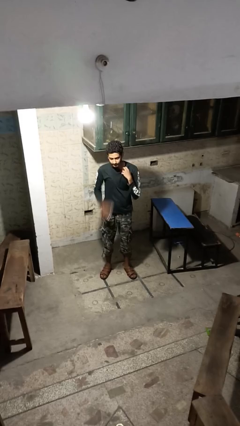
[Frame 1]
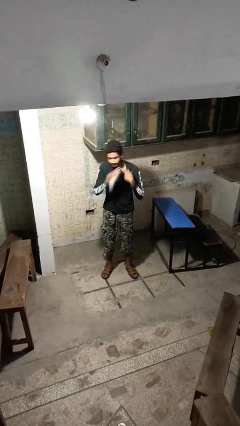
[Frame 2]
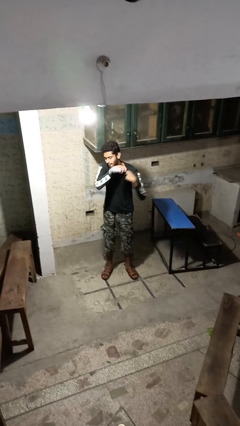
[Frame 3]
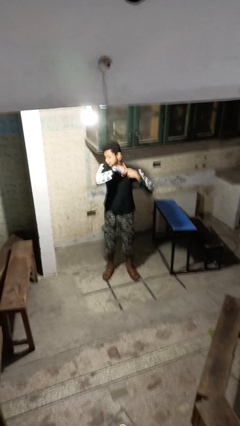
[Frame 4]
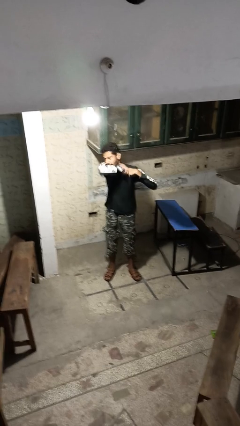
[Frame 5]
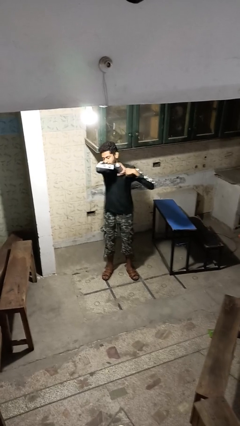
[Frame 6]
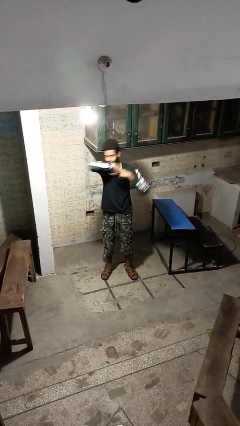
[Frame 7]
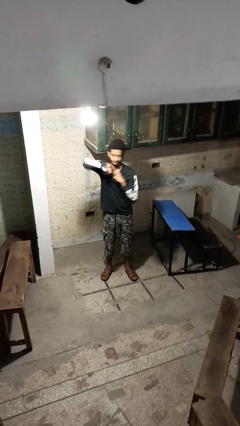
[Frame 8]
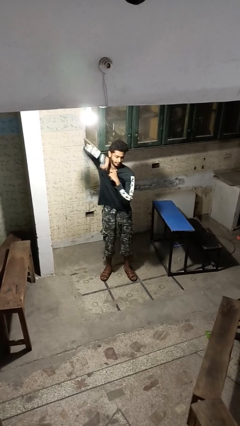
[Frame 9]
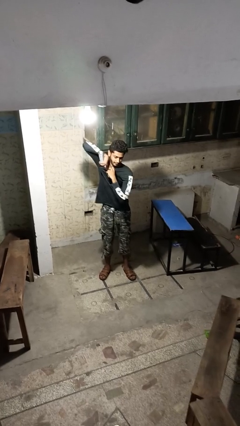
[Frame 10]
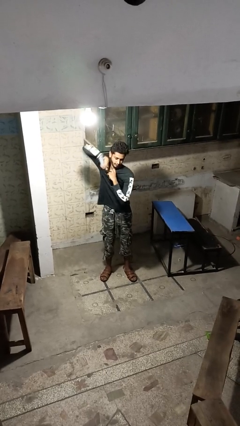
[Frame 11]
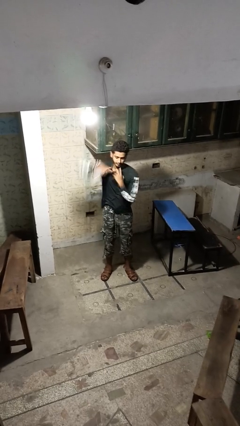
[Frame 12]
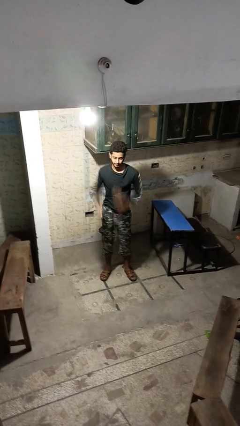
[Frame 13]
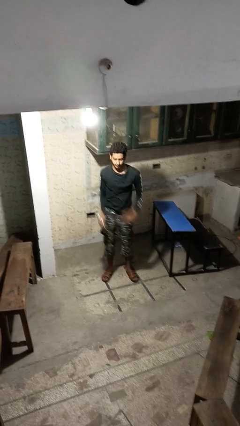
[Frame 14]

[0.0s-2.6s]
person applies deodorant

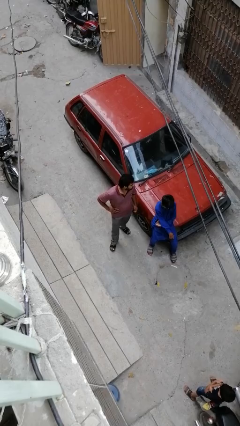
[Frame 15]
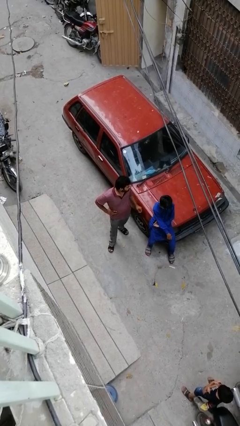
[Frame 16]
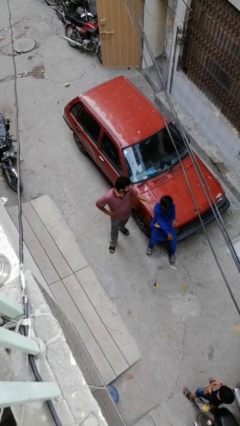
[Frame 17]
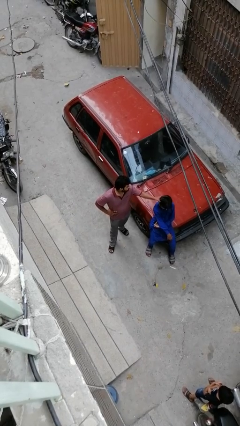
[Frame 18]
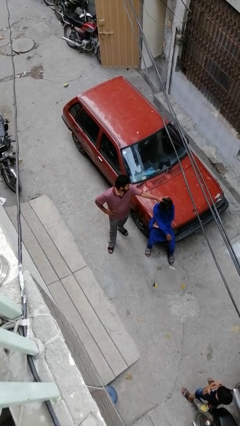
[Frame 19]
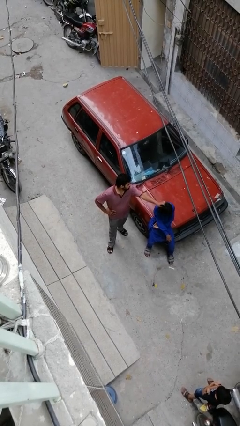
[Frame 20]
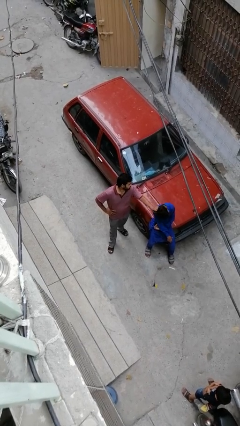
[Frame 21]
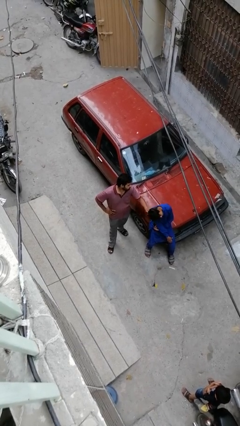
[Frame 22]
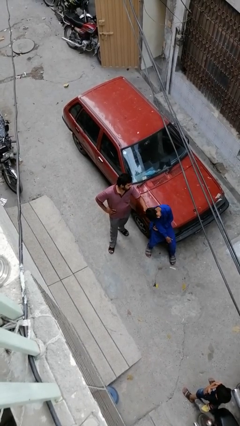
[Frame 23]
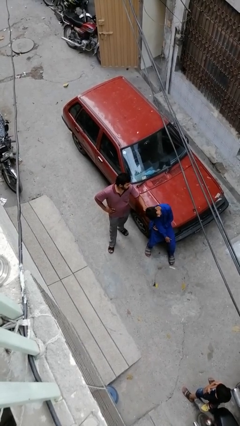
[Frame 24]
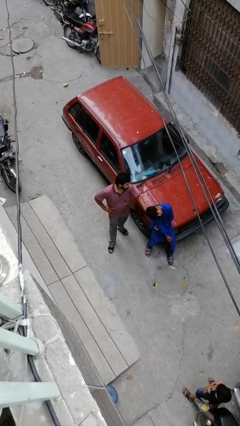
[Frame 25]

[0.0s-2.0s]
person grabs person by hair

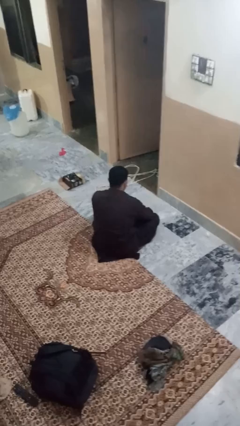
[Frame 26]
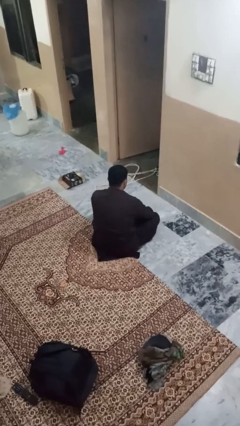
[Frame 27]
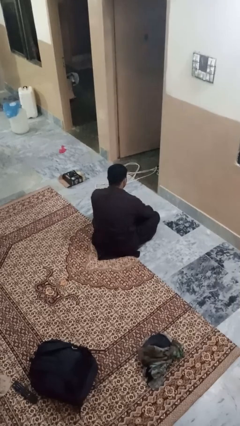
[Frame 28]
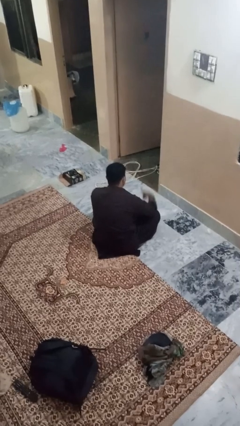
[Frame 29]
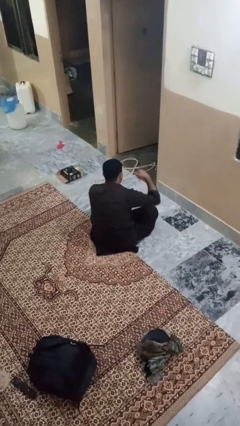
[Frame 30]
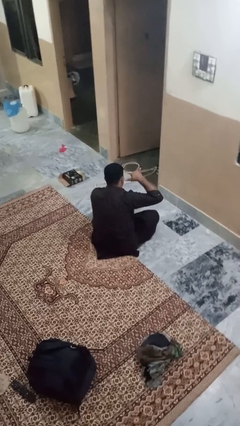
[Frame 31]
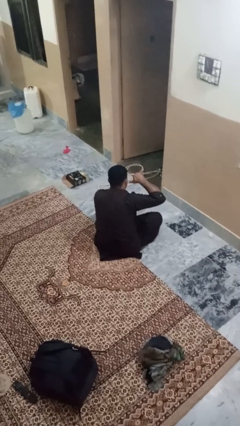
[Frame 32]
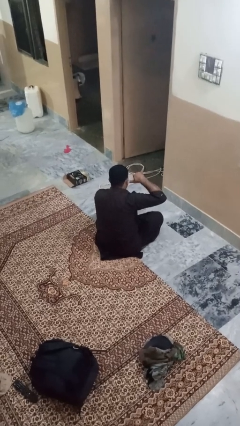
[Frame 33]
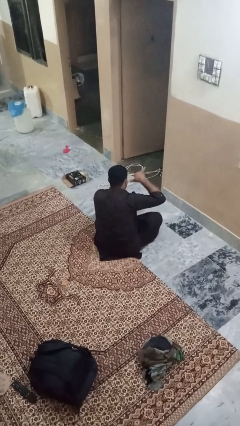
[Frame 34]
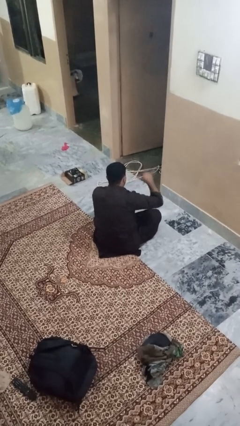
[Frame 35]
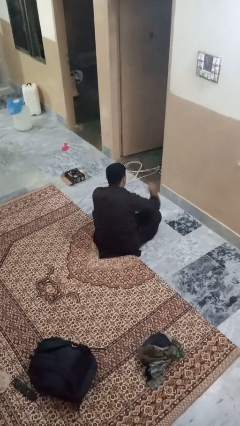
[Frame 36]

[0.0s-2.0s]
person gestures call me

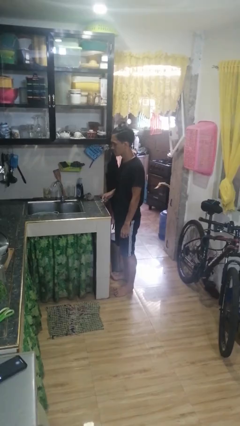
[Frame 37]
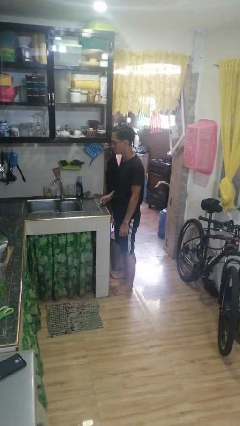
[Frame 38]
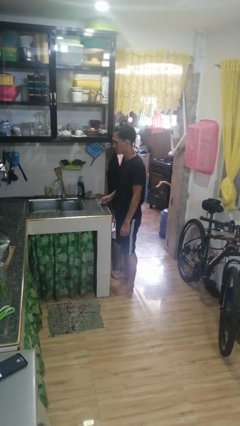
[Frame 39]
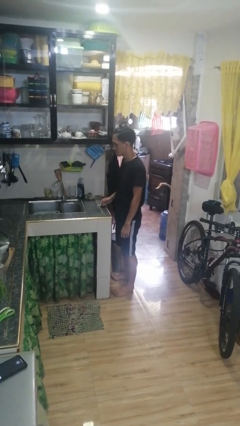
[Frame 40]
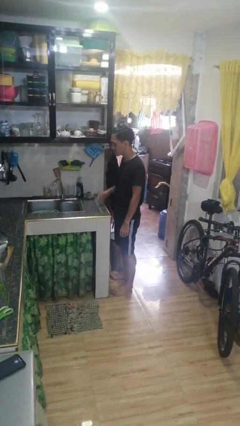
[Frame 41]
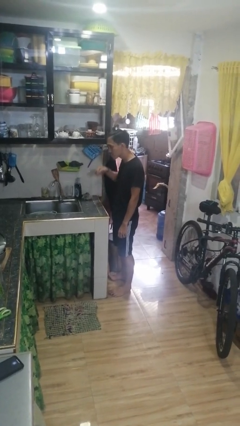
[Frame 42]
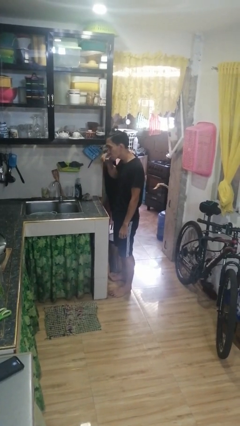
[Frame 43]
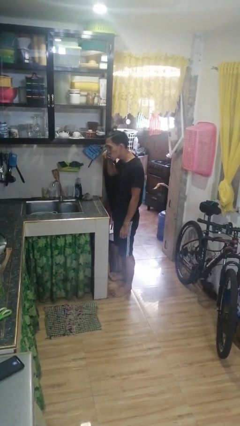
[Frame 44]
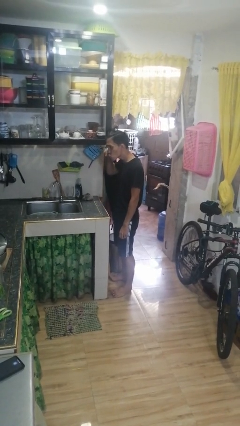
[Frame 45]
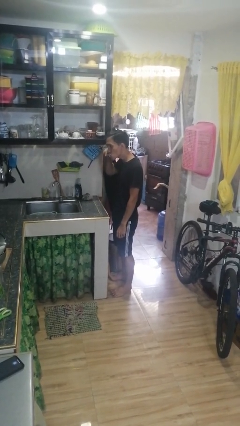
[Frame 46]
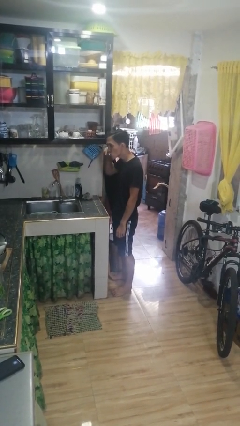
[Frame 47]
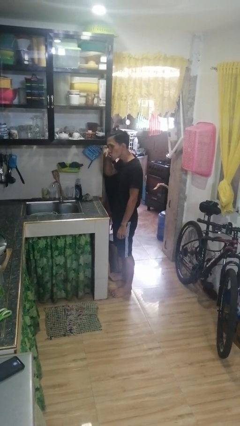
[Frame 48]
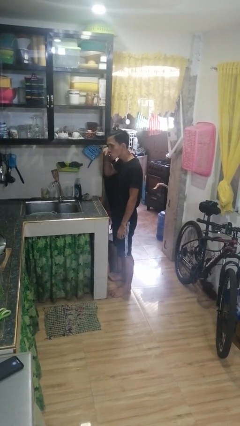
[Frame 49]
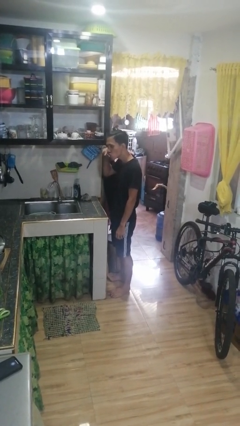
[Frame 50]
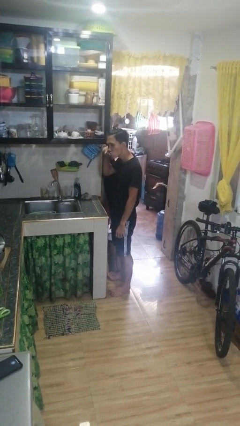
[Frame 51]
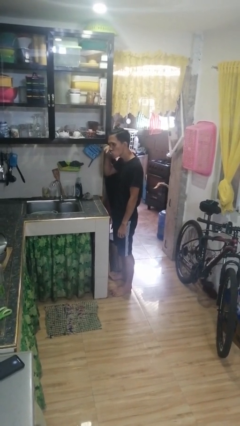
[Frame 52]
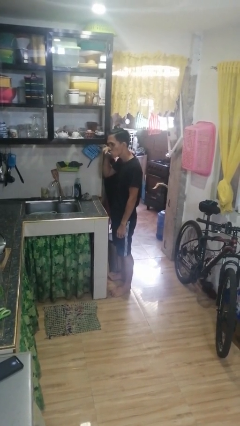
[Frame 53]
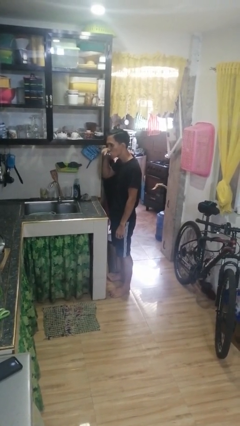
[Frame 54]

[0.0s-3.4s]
person brushes teeth

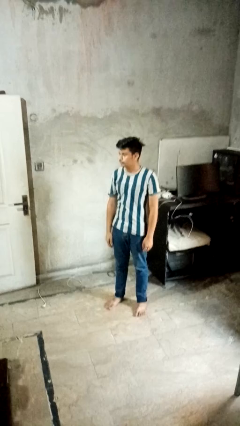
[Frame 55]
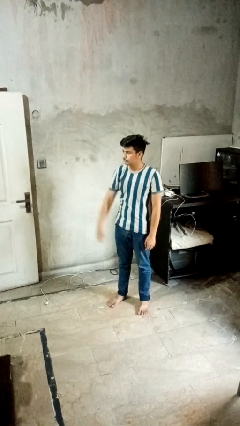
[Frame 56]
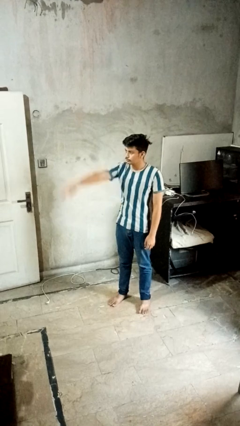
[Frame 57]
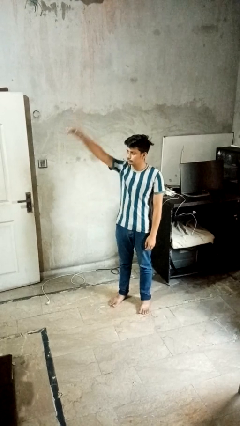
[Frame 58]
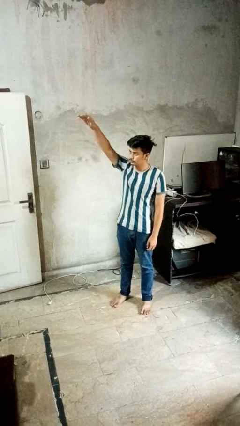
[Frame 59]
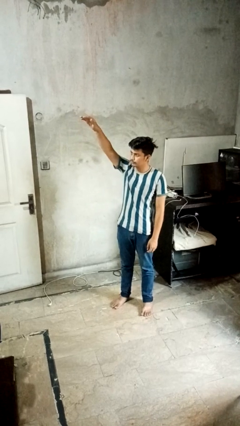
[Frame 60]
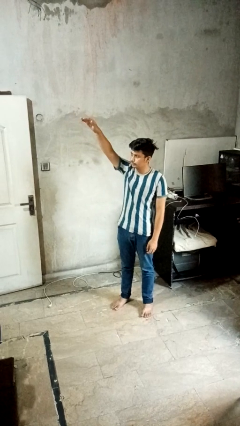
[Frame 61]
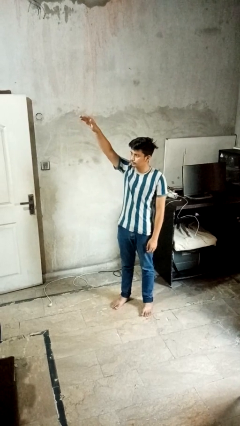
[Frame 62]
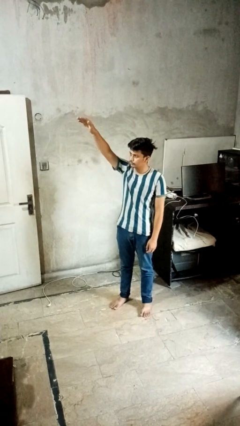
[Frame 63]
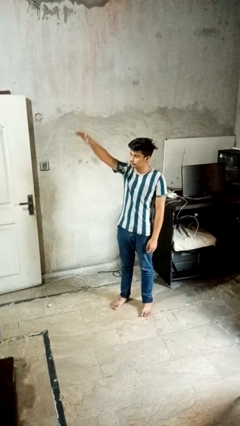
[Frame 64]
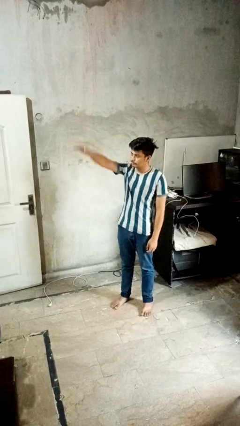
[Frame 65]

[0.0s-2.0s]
person gestures swipe up

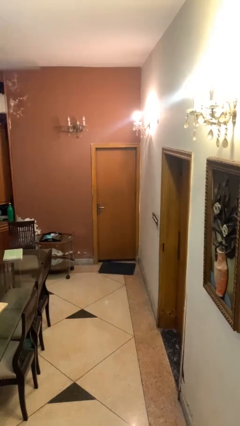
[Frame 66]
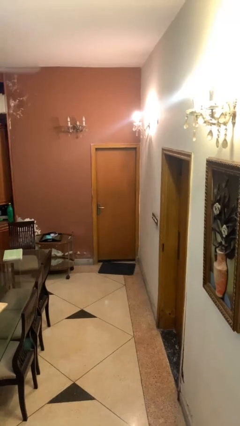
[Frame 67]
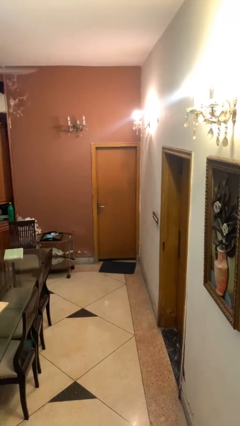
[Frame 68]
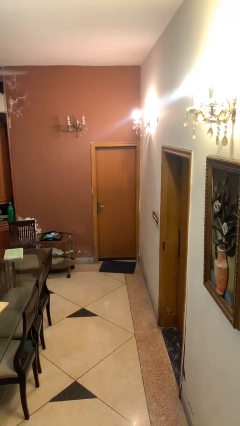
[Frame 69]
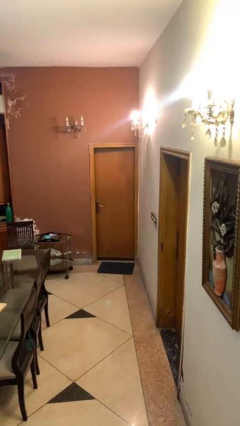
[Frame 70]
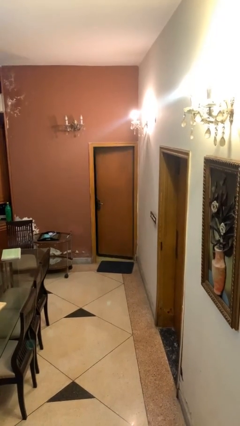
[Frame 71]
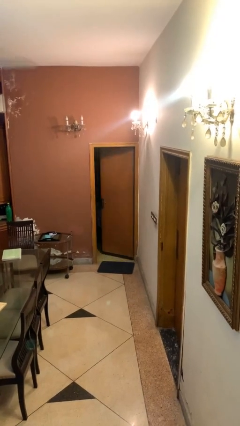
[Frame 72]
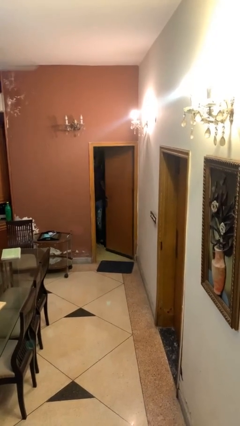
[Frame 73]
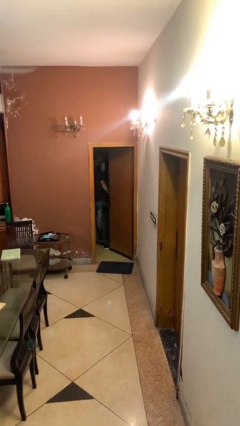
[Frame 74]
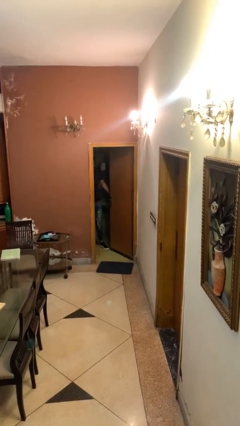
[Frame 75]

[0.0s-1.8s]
person opens facility door

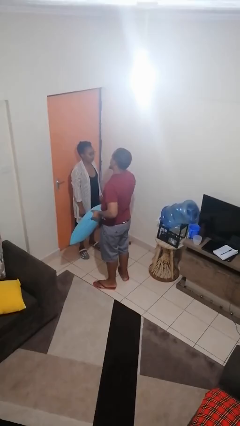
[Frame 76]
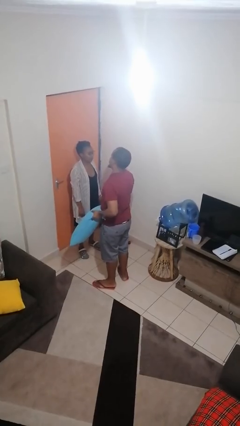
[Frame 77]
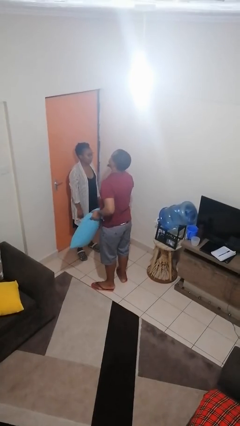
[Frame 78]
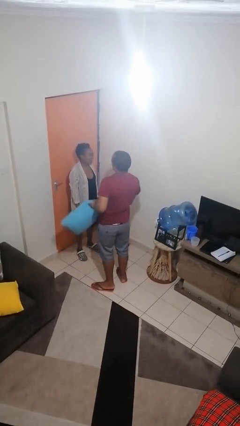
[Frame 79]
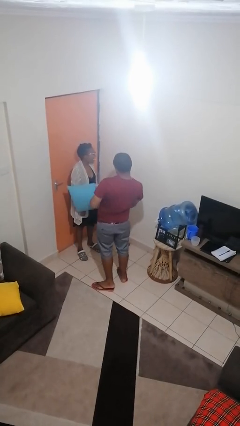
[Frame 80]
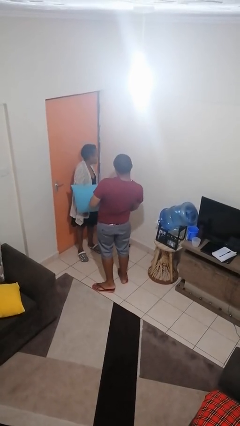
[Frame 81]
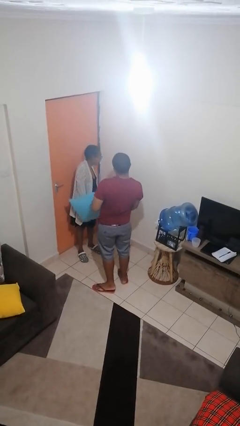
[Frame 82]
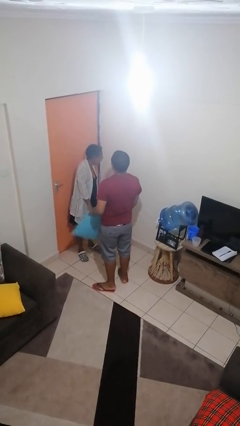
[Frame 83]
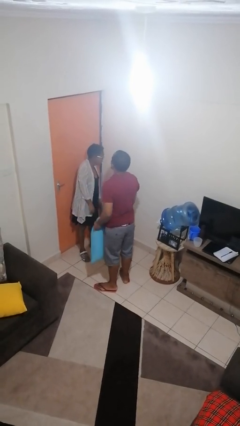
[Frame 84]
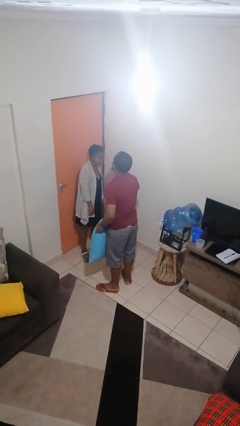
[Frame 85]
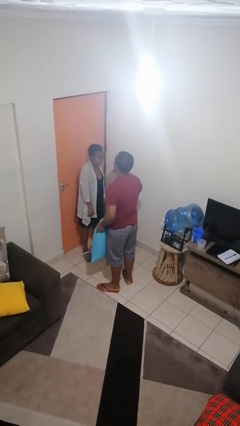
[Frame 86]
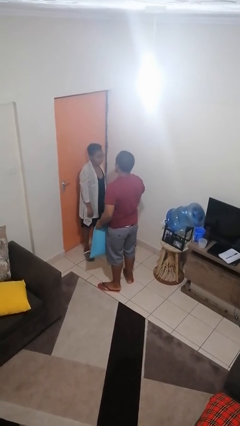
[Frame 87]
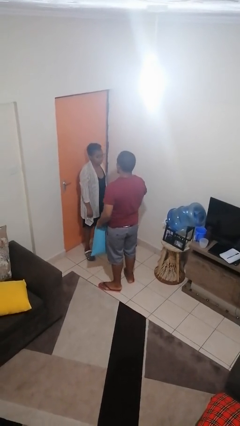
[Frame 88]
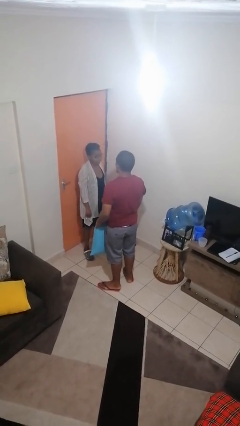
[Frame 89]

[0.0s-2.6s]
person hits person with pillow

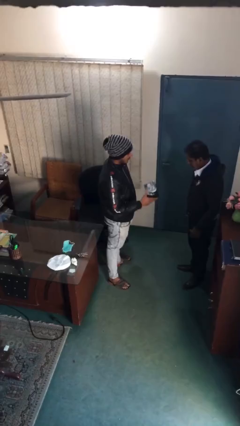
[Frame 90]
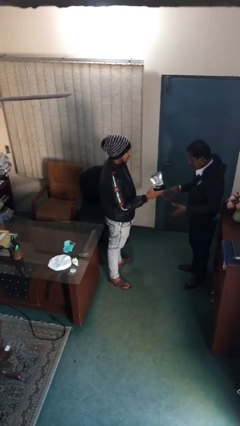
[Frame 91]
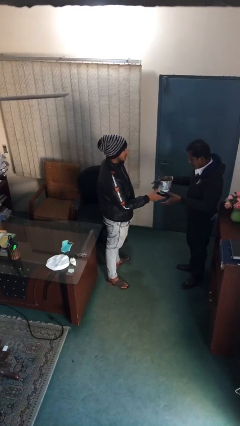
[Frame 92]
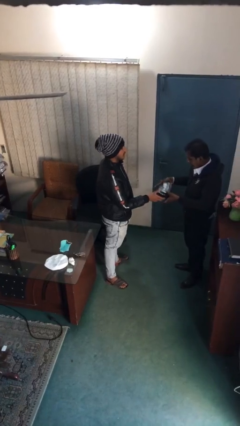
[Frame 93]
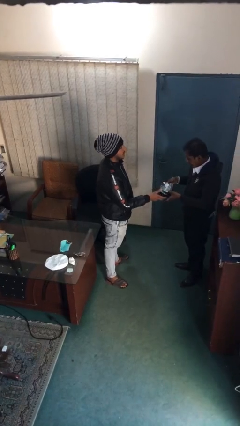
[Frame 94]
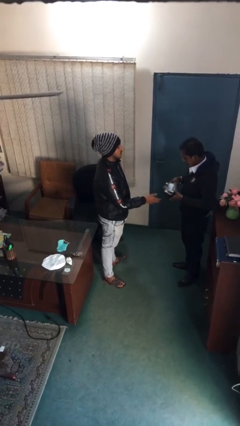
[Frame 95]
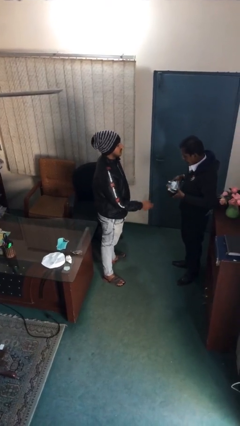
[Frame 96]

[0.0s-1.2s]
person transfers object to person
